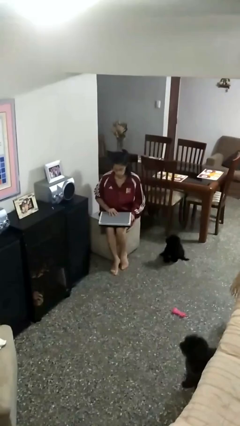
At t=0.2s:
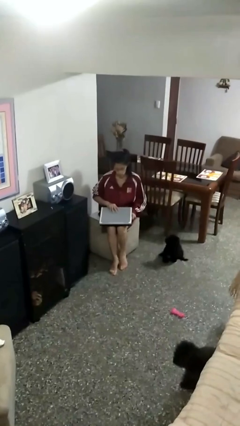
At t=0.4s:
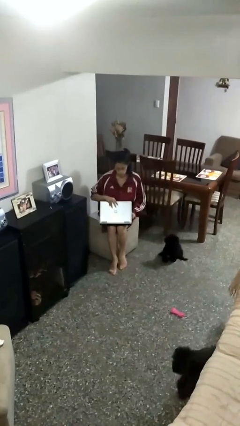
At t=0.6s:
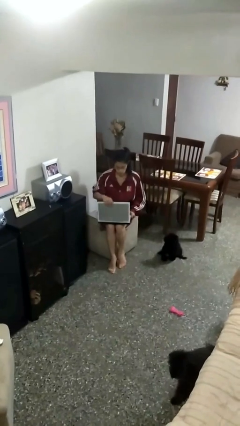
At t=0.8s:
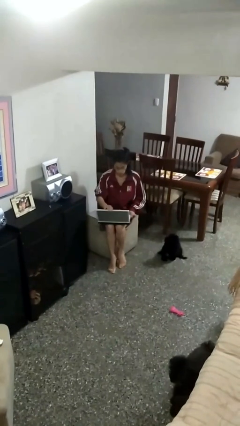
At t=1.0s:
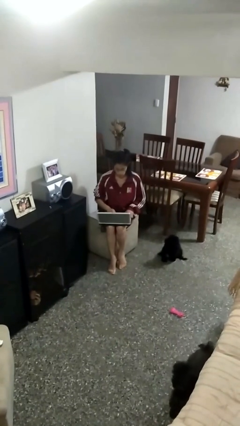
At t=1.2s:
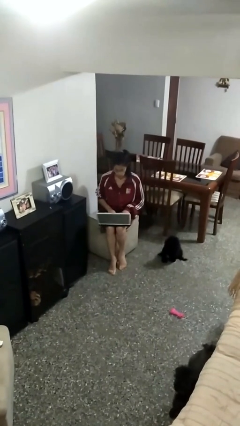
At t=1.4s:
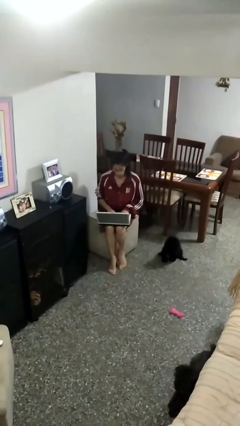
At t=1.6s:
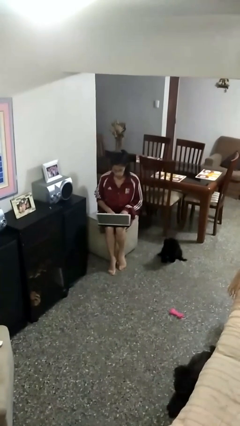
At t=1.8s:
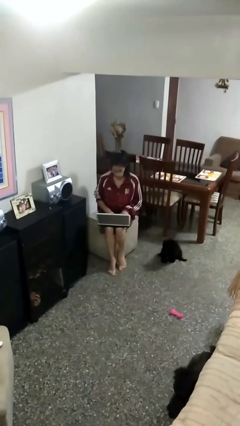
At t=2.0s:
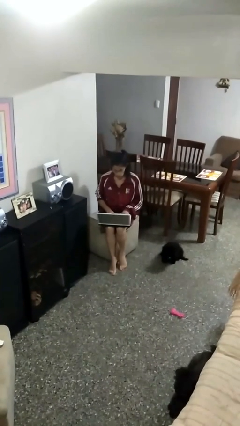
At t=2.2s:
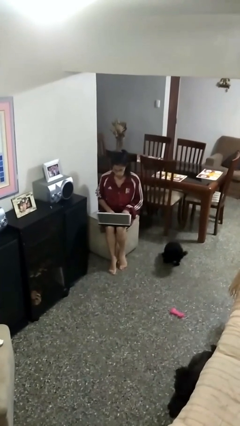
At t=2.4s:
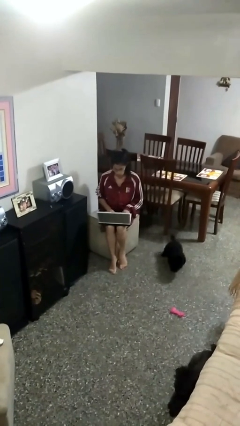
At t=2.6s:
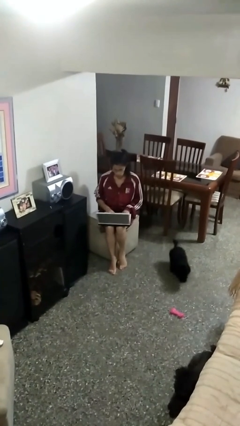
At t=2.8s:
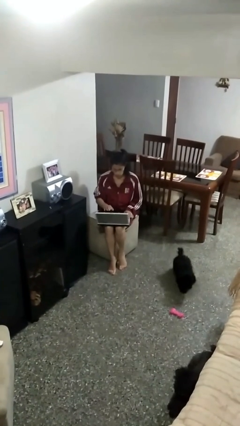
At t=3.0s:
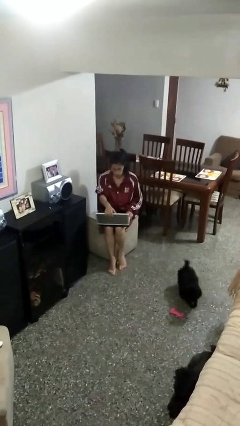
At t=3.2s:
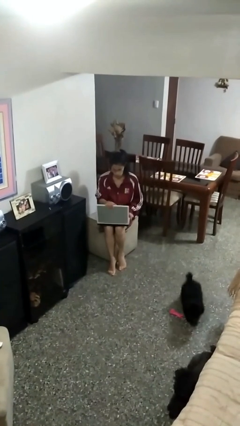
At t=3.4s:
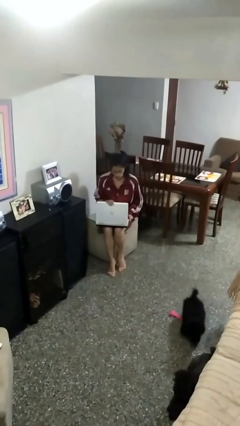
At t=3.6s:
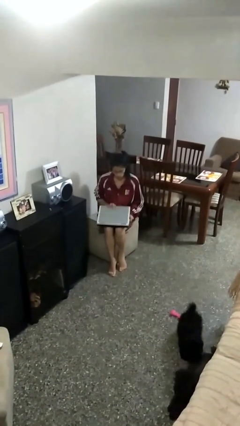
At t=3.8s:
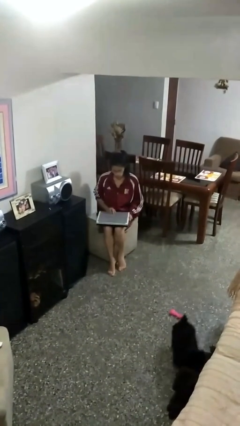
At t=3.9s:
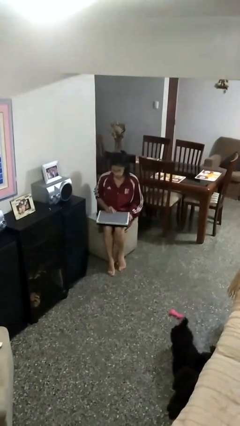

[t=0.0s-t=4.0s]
person interacts with laptop

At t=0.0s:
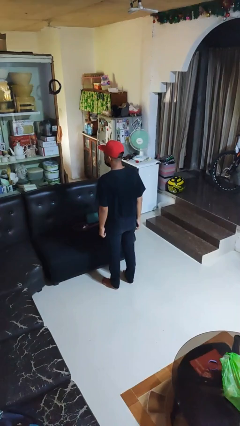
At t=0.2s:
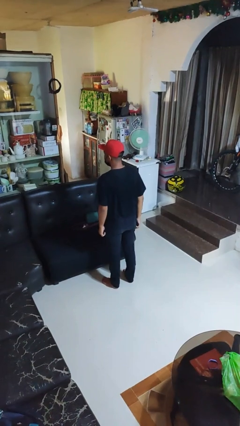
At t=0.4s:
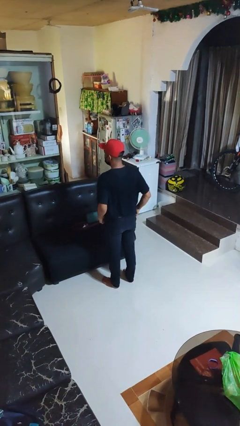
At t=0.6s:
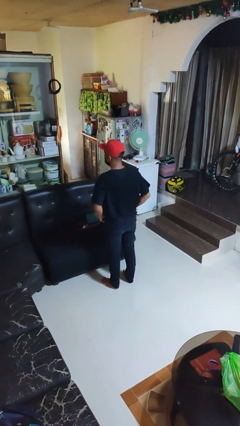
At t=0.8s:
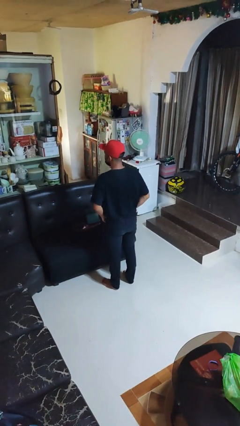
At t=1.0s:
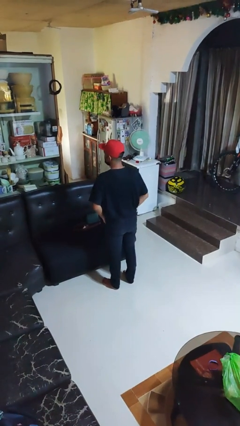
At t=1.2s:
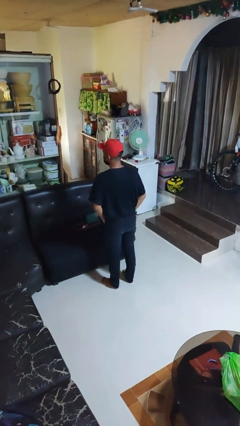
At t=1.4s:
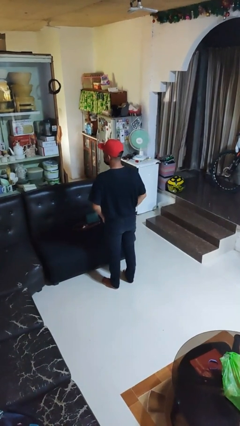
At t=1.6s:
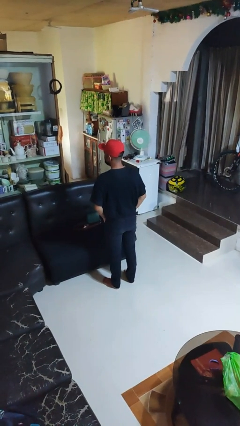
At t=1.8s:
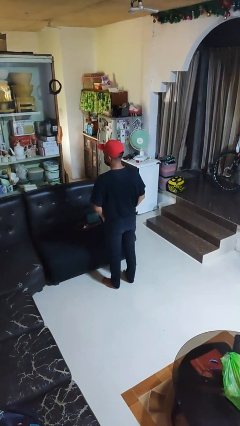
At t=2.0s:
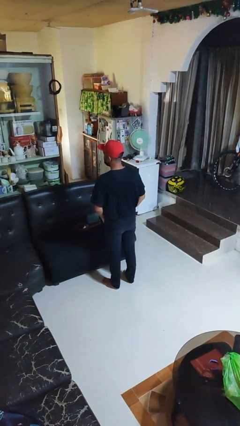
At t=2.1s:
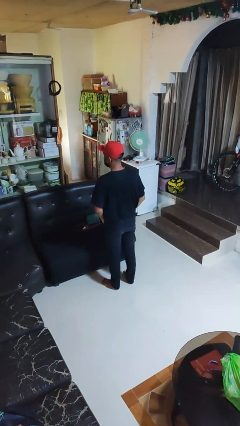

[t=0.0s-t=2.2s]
person puts hands in back pockets

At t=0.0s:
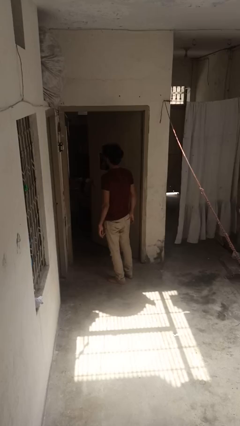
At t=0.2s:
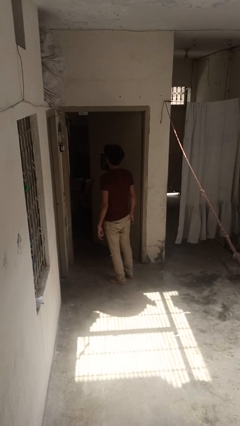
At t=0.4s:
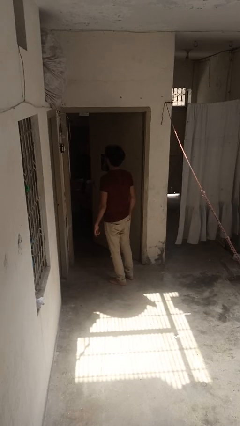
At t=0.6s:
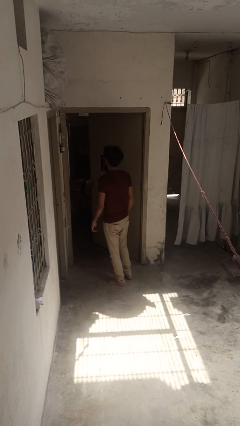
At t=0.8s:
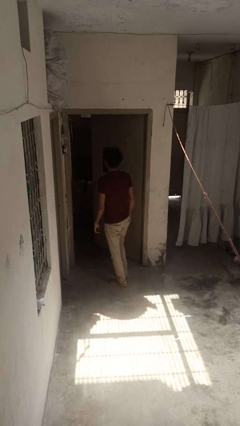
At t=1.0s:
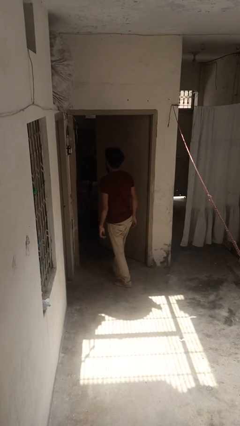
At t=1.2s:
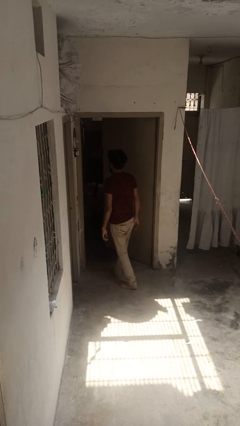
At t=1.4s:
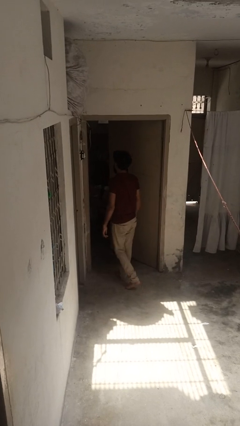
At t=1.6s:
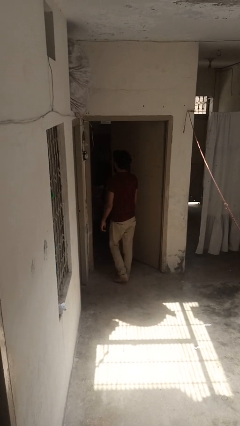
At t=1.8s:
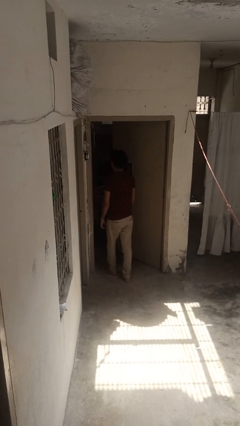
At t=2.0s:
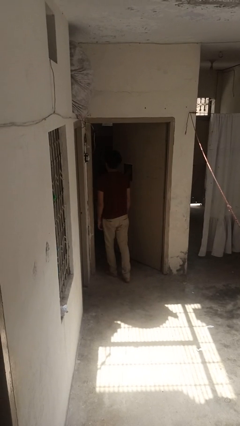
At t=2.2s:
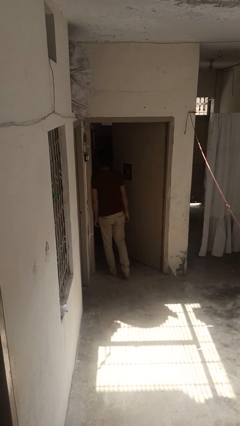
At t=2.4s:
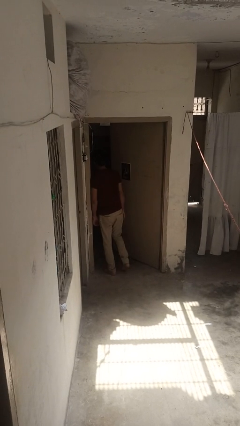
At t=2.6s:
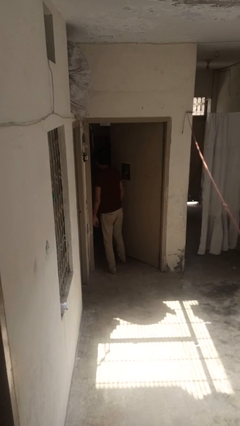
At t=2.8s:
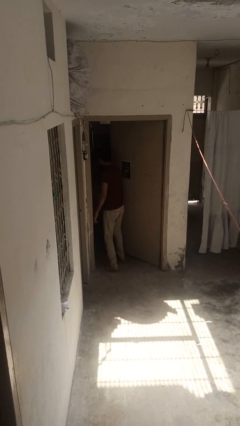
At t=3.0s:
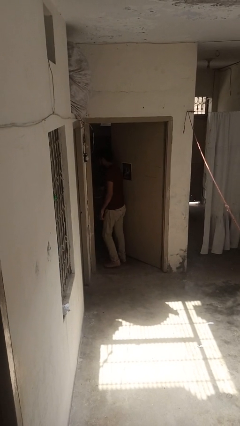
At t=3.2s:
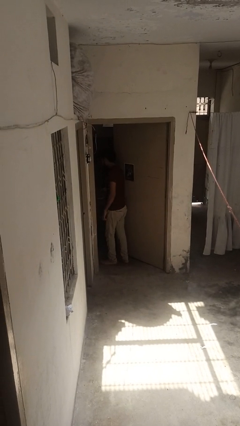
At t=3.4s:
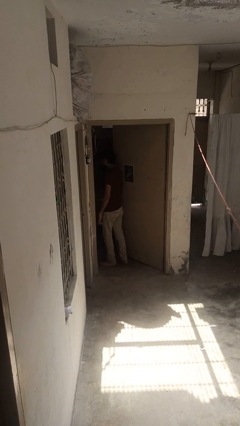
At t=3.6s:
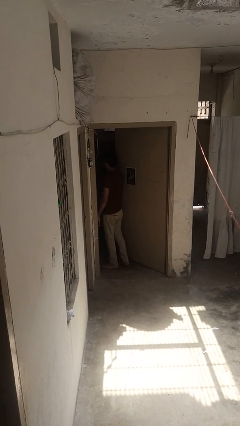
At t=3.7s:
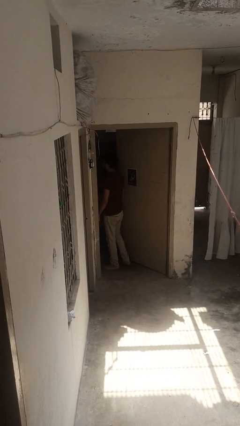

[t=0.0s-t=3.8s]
person bumps into wall

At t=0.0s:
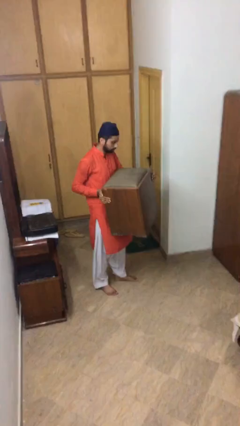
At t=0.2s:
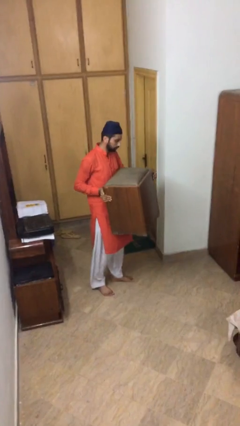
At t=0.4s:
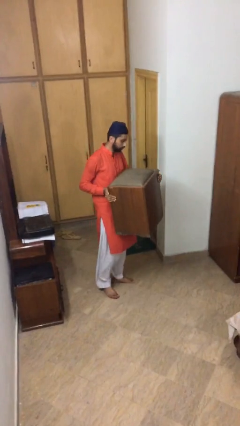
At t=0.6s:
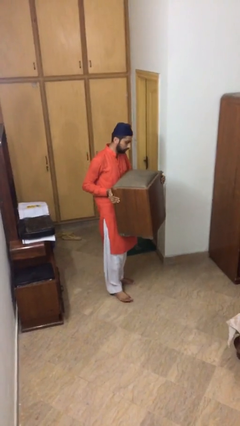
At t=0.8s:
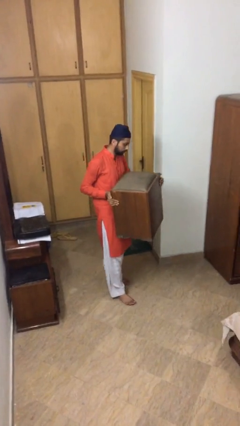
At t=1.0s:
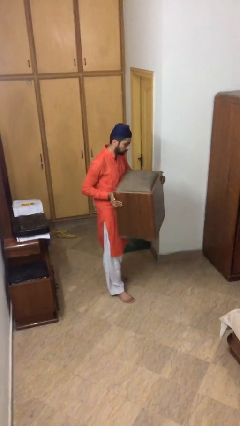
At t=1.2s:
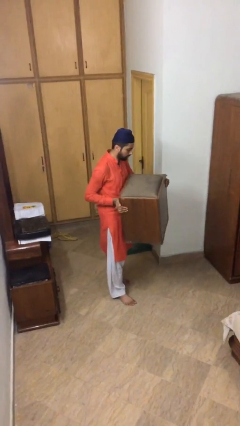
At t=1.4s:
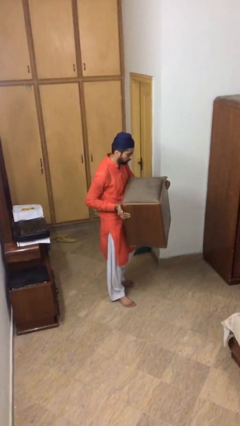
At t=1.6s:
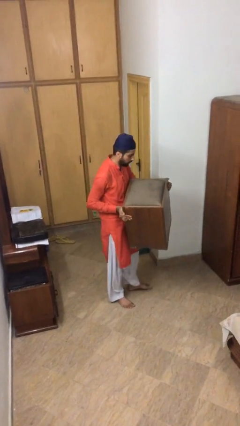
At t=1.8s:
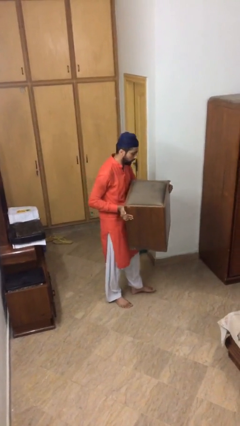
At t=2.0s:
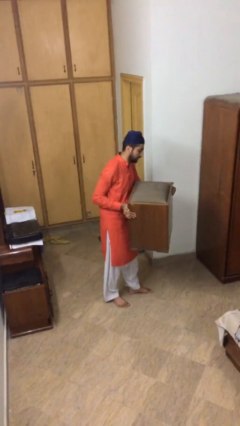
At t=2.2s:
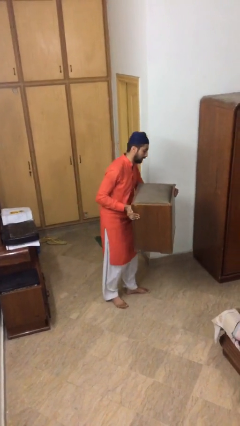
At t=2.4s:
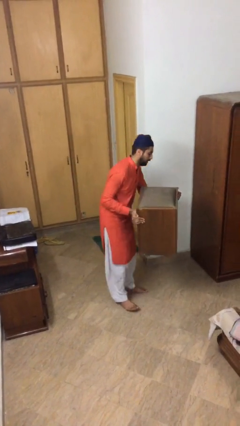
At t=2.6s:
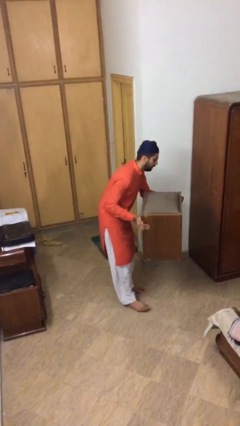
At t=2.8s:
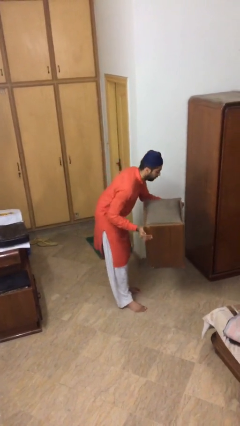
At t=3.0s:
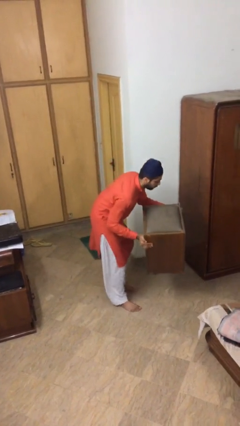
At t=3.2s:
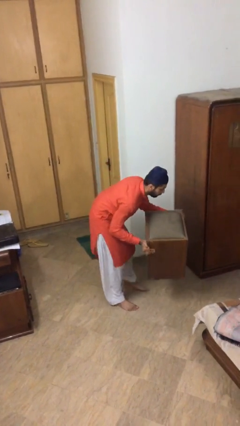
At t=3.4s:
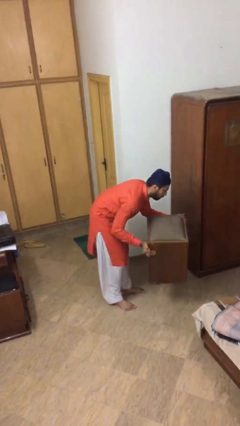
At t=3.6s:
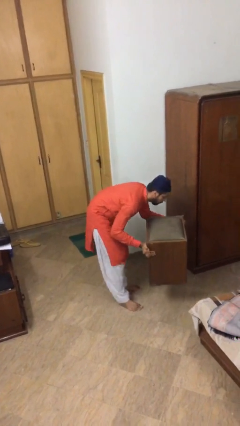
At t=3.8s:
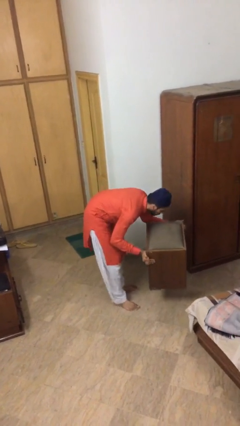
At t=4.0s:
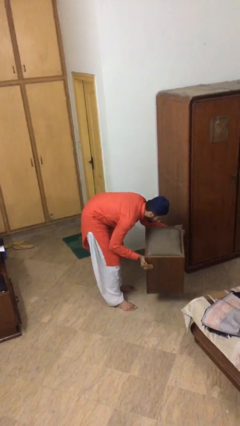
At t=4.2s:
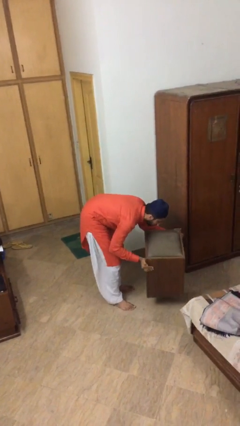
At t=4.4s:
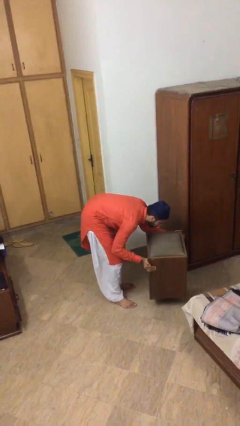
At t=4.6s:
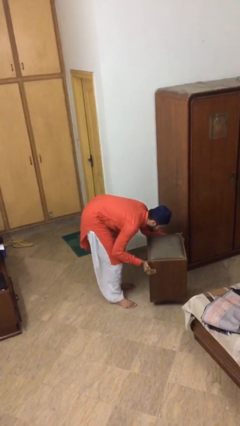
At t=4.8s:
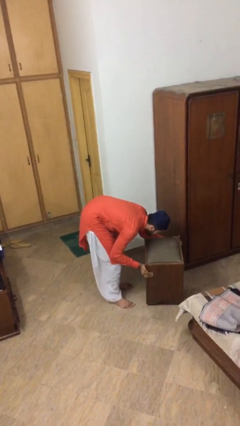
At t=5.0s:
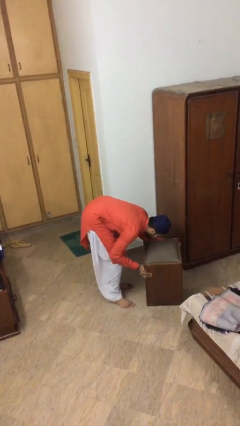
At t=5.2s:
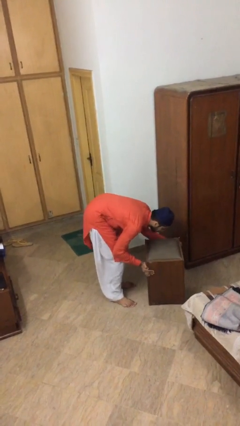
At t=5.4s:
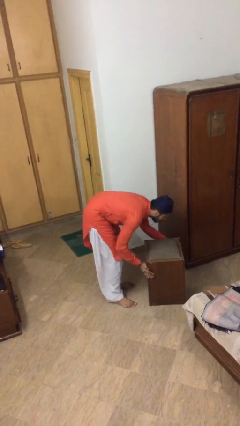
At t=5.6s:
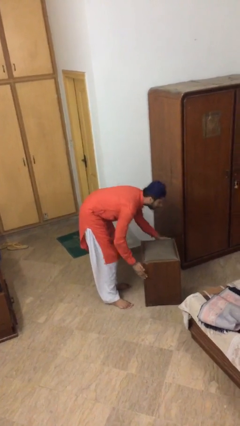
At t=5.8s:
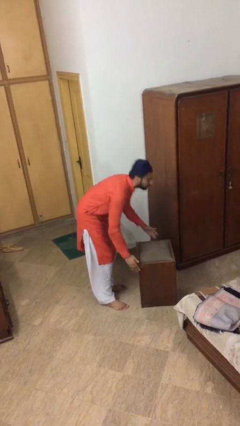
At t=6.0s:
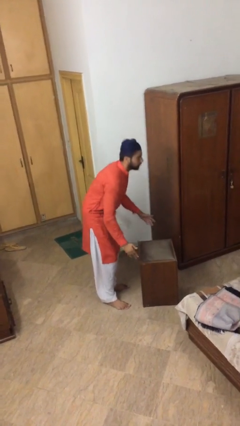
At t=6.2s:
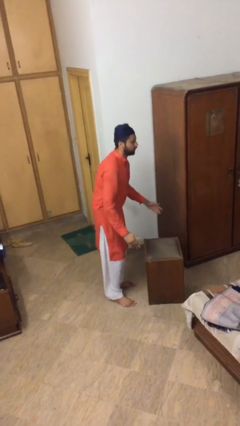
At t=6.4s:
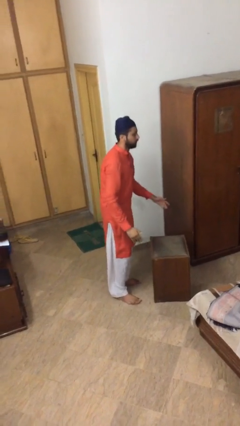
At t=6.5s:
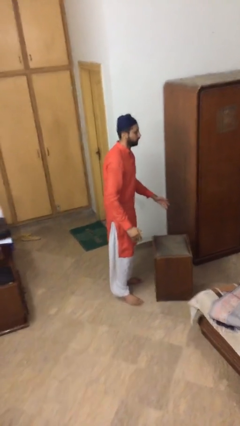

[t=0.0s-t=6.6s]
person puts down object on floor

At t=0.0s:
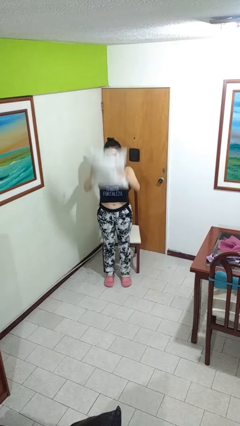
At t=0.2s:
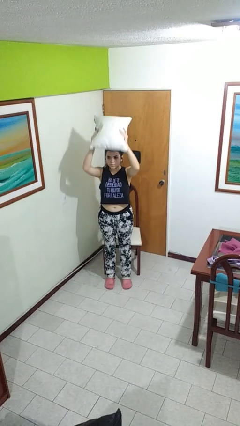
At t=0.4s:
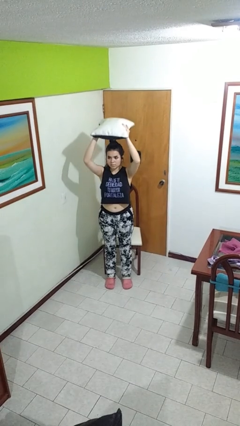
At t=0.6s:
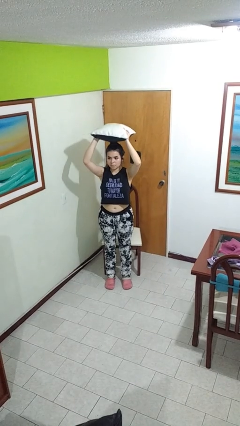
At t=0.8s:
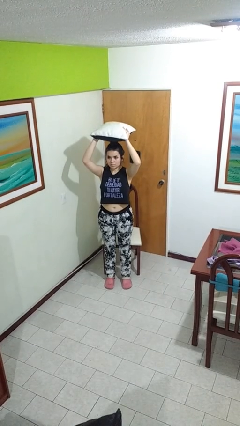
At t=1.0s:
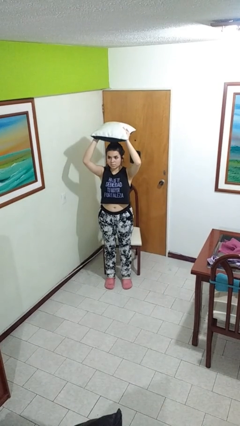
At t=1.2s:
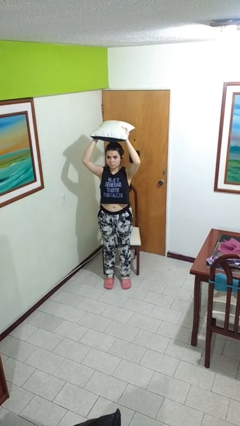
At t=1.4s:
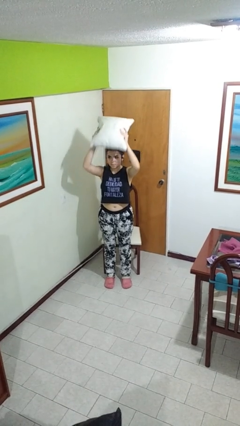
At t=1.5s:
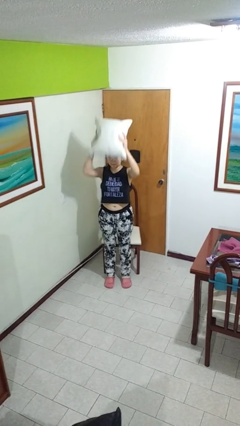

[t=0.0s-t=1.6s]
person holds object above head
